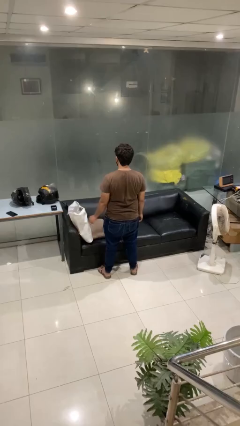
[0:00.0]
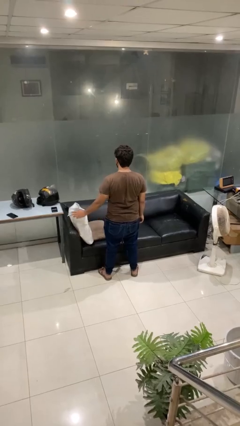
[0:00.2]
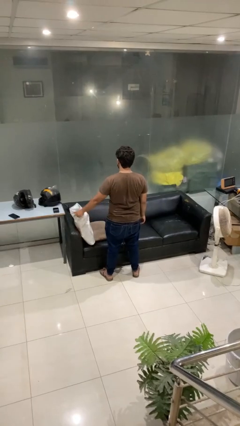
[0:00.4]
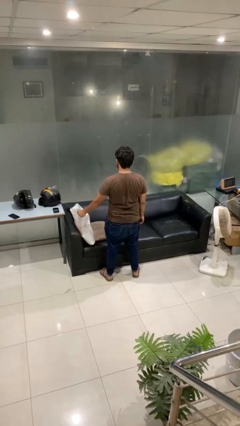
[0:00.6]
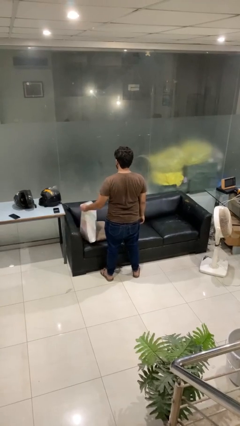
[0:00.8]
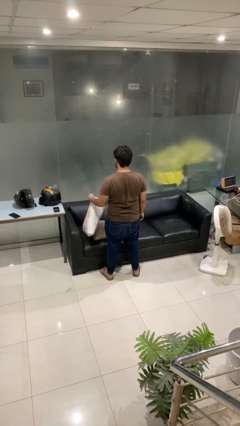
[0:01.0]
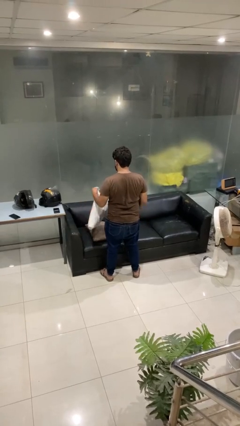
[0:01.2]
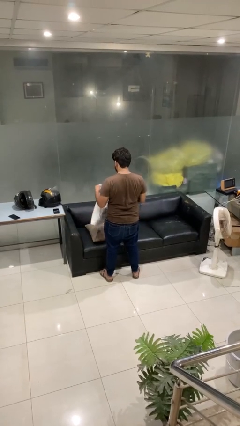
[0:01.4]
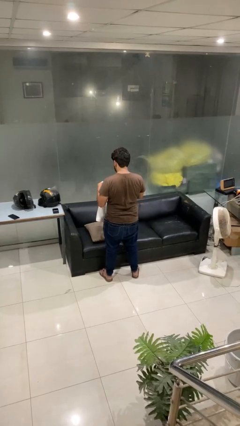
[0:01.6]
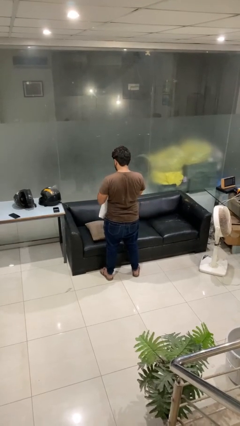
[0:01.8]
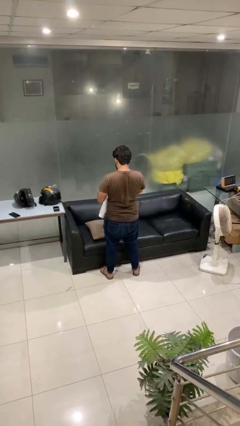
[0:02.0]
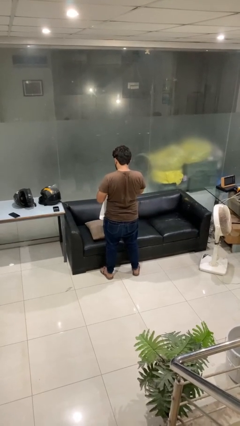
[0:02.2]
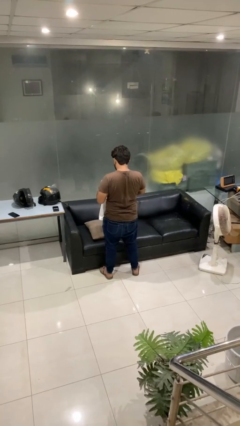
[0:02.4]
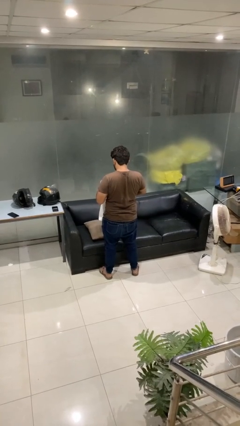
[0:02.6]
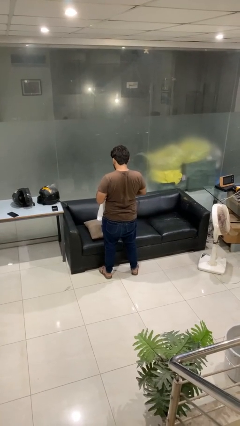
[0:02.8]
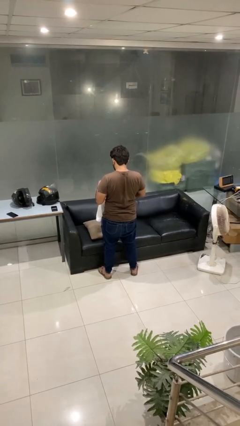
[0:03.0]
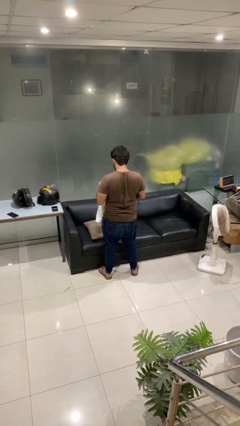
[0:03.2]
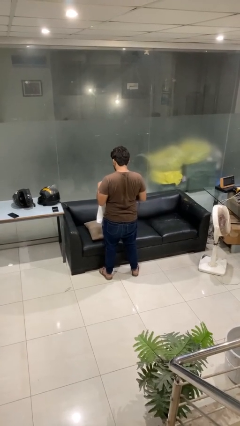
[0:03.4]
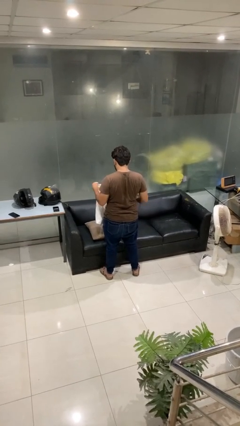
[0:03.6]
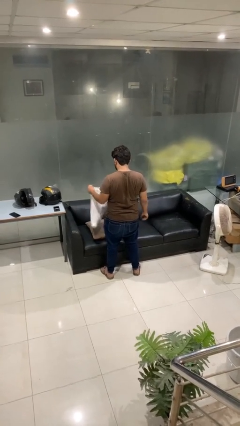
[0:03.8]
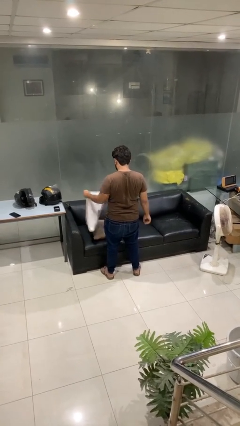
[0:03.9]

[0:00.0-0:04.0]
person searches in bag

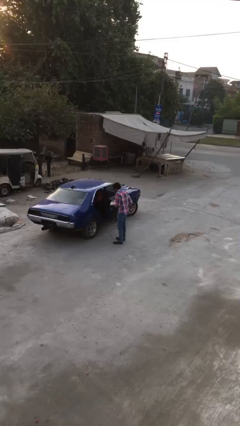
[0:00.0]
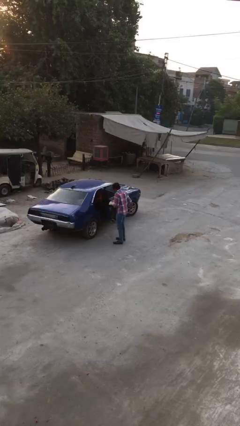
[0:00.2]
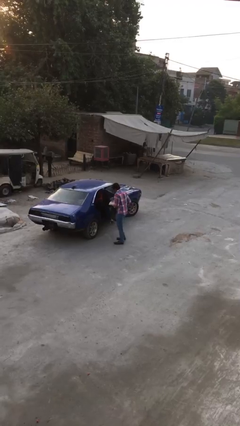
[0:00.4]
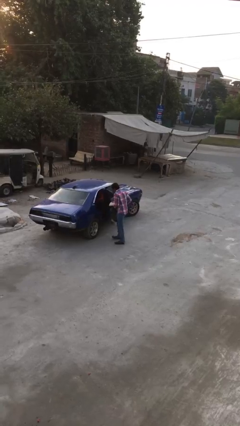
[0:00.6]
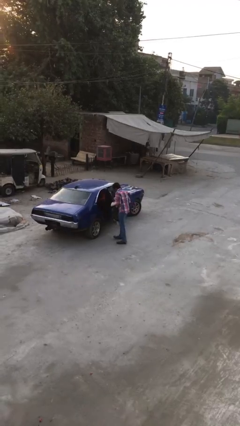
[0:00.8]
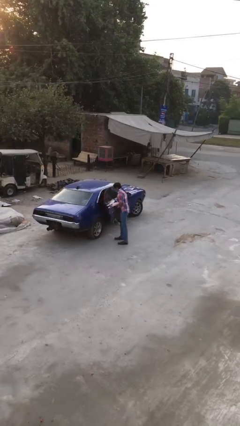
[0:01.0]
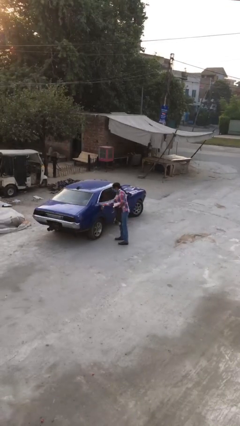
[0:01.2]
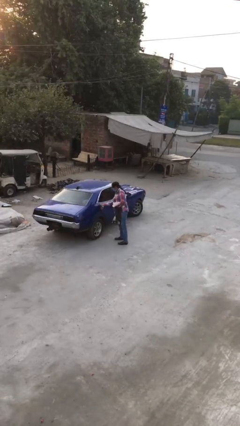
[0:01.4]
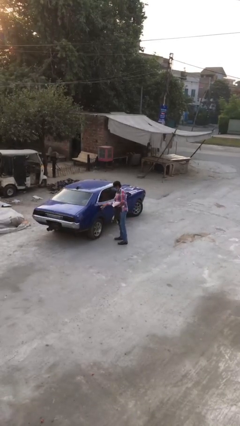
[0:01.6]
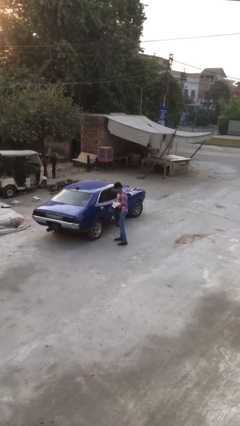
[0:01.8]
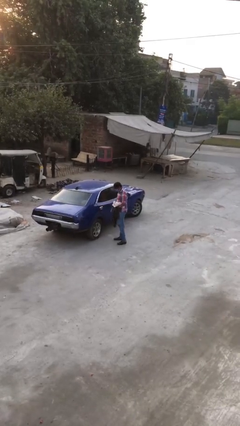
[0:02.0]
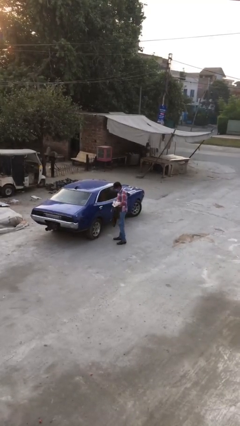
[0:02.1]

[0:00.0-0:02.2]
person closes car door

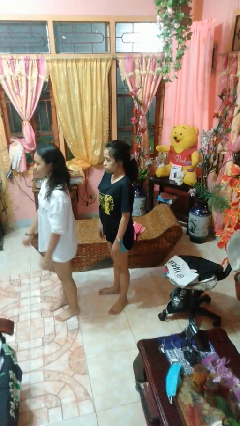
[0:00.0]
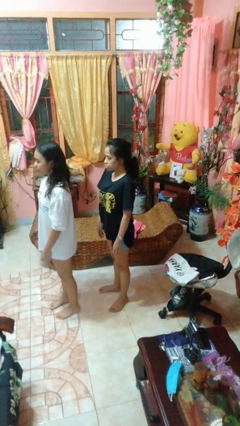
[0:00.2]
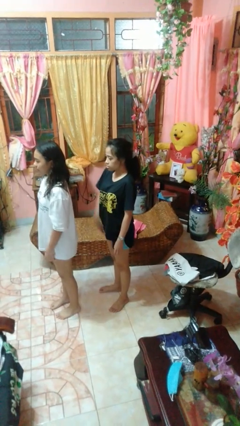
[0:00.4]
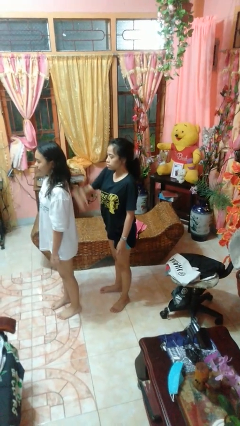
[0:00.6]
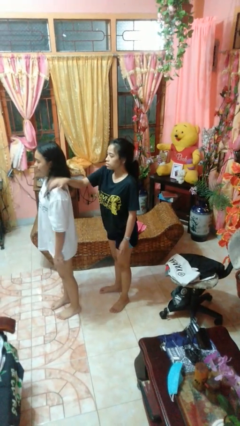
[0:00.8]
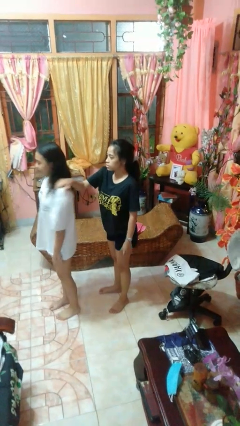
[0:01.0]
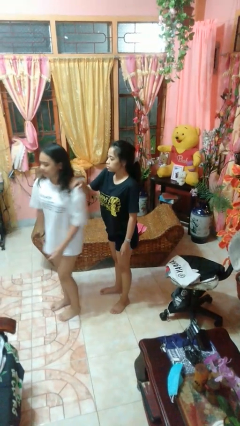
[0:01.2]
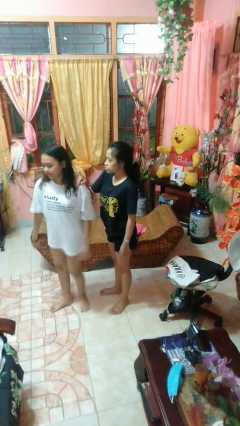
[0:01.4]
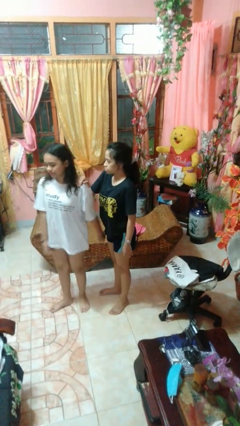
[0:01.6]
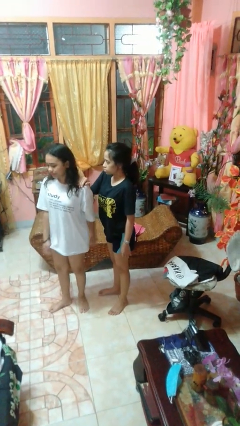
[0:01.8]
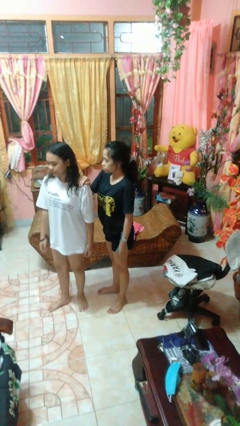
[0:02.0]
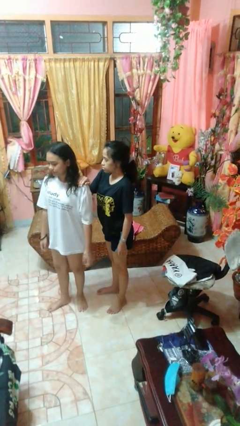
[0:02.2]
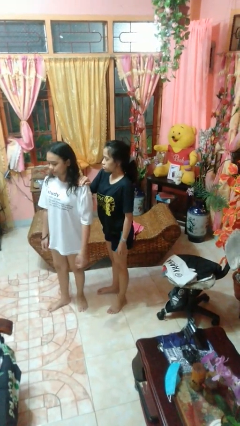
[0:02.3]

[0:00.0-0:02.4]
person grabs person by shoulder

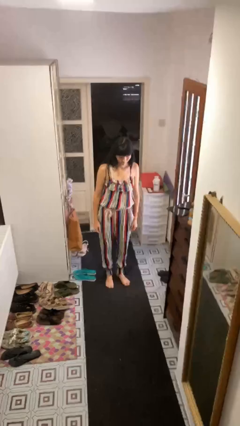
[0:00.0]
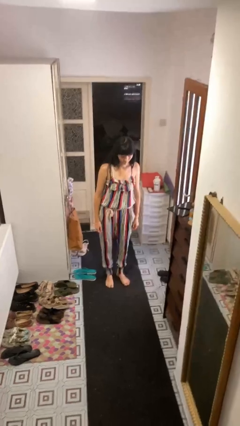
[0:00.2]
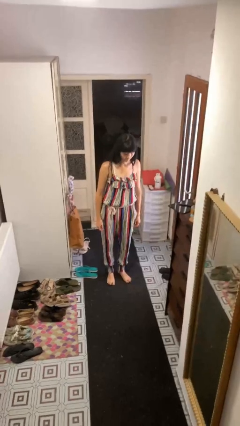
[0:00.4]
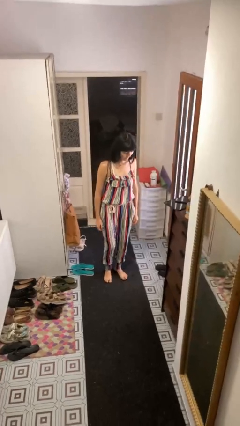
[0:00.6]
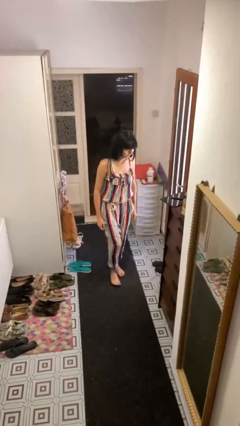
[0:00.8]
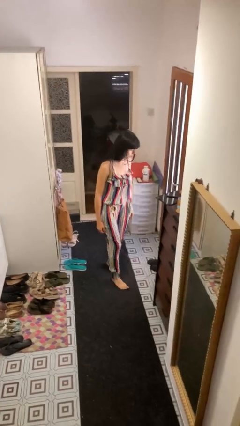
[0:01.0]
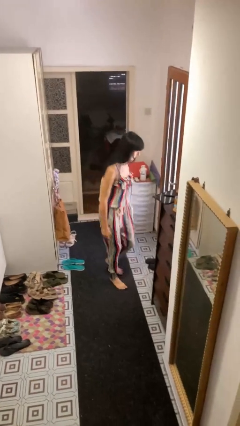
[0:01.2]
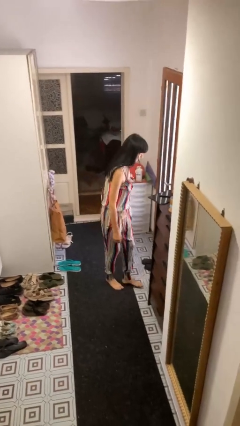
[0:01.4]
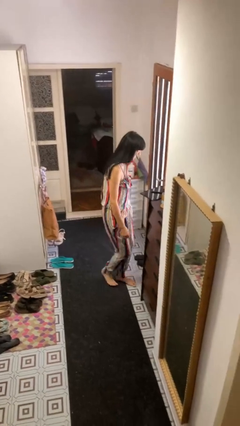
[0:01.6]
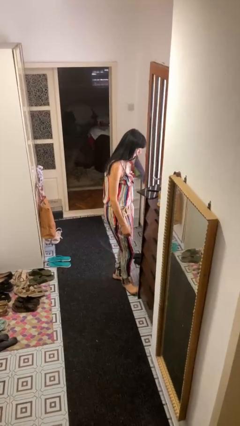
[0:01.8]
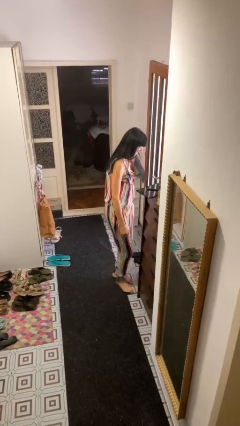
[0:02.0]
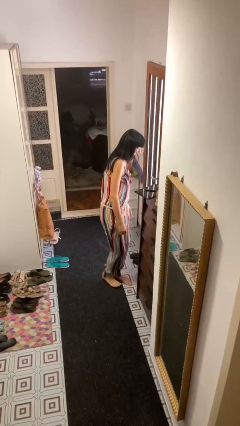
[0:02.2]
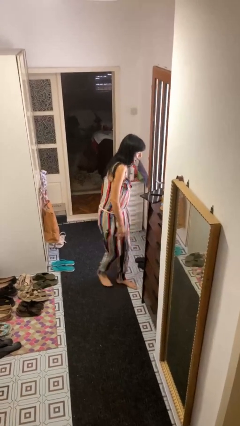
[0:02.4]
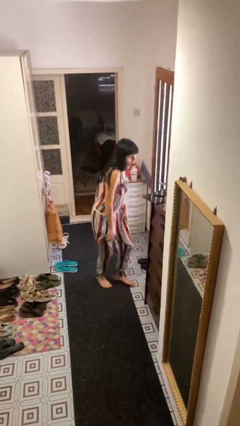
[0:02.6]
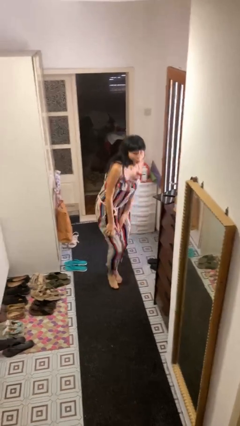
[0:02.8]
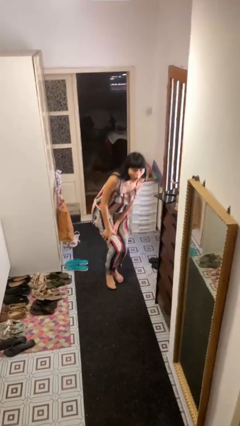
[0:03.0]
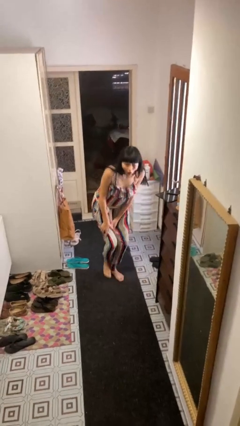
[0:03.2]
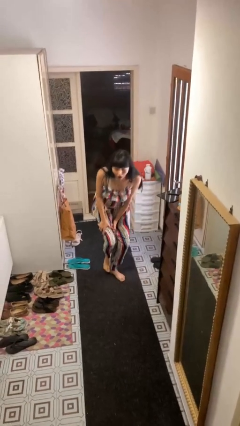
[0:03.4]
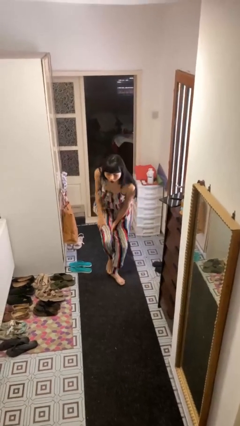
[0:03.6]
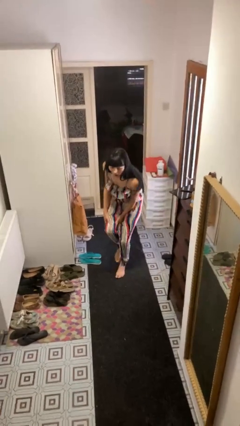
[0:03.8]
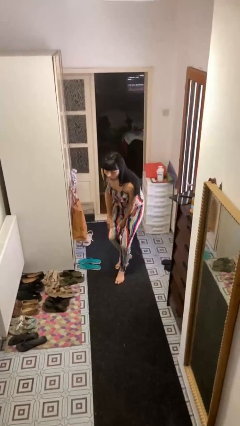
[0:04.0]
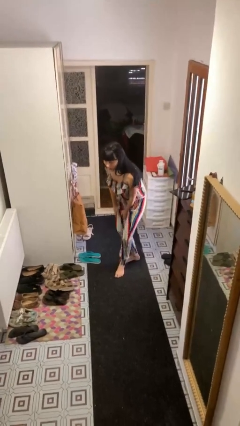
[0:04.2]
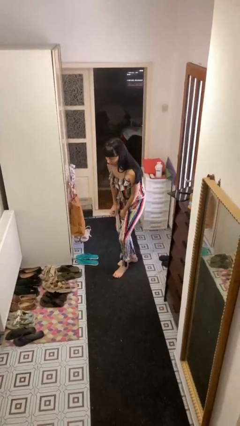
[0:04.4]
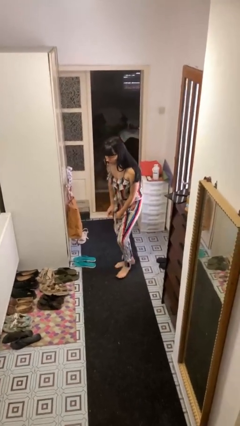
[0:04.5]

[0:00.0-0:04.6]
person stubs toe

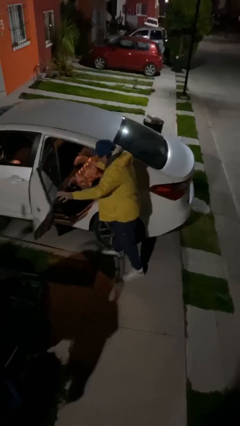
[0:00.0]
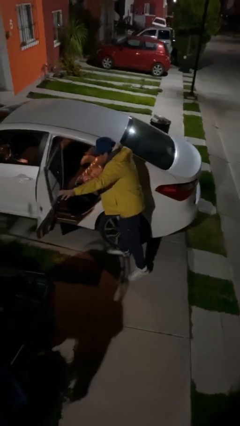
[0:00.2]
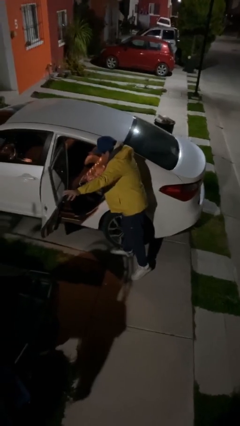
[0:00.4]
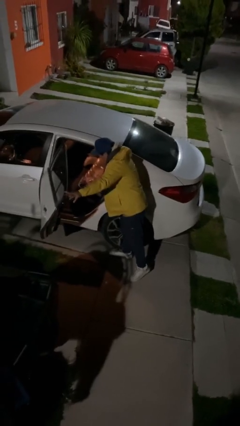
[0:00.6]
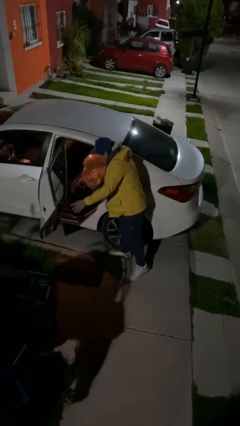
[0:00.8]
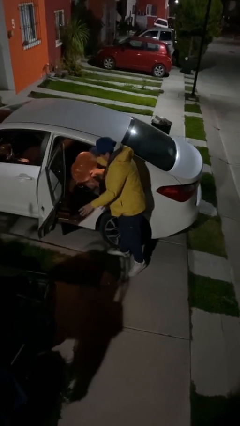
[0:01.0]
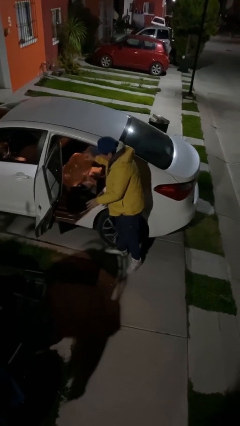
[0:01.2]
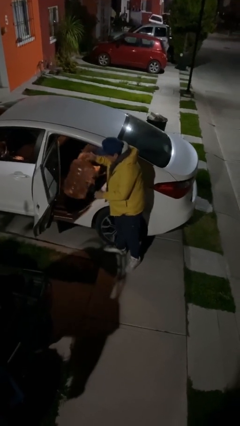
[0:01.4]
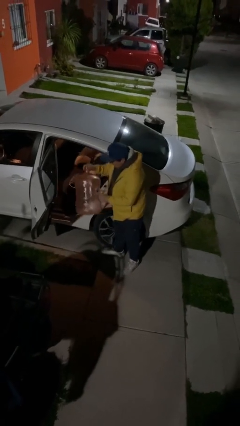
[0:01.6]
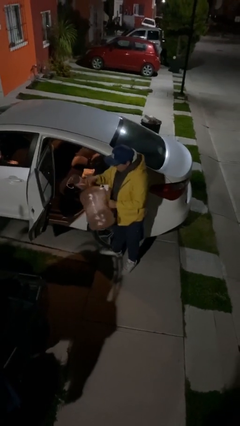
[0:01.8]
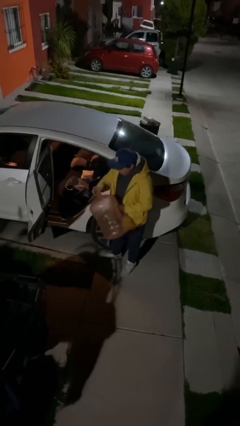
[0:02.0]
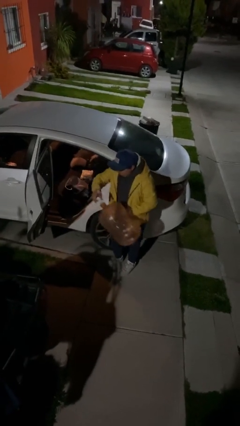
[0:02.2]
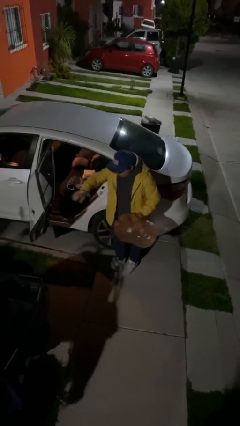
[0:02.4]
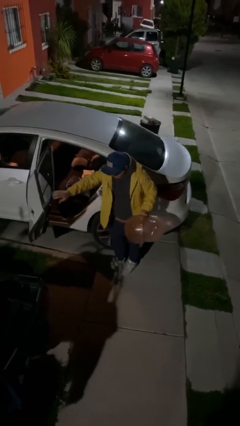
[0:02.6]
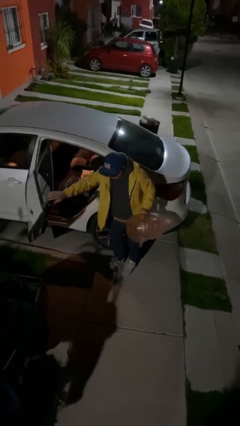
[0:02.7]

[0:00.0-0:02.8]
person unloads car

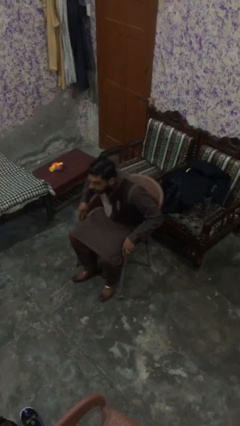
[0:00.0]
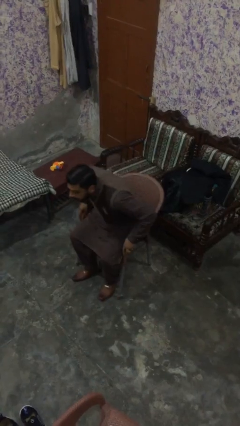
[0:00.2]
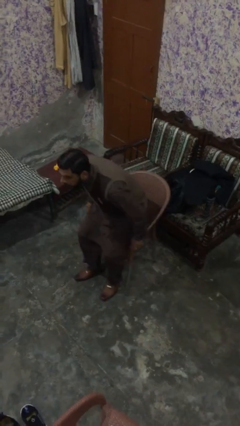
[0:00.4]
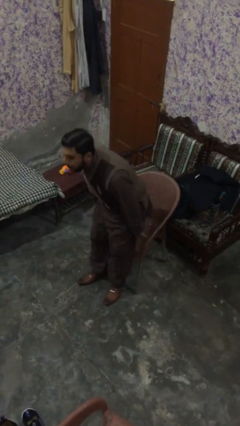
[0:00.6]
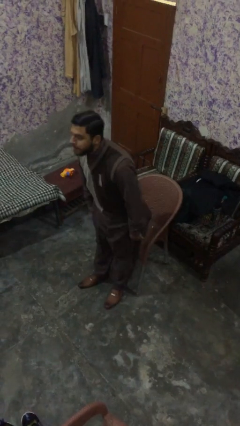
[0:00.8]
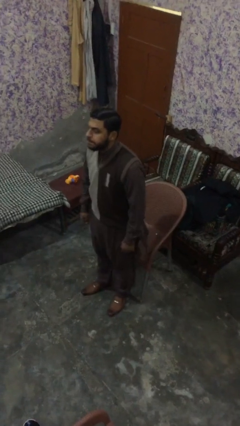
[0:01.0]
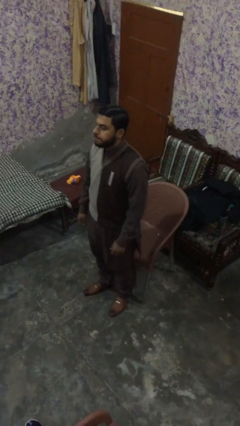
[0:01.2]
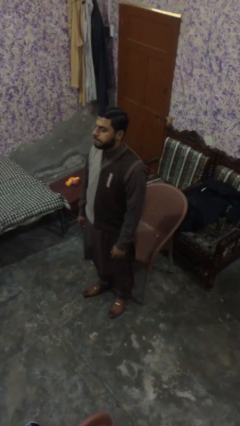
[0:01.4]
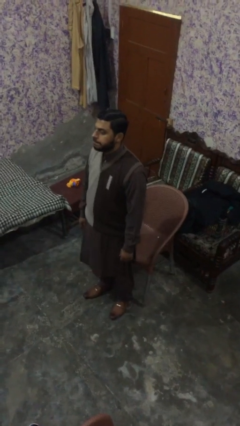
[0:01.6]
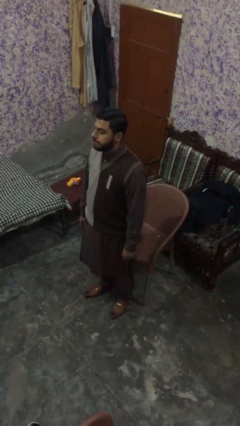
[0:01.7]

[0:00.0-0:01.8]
person stands up
